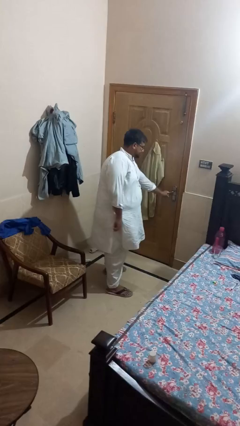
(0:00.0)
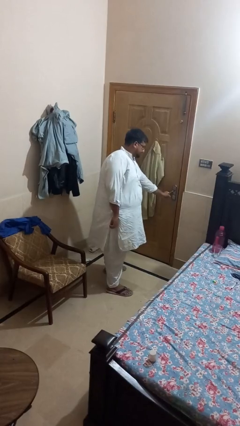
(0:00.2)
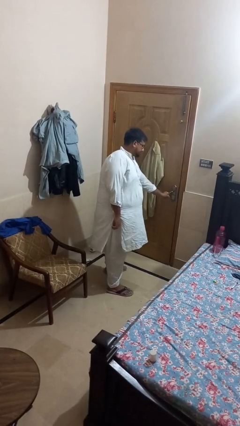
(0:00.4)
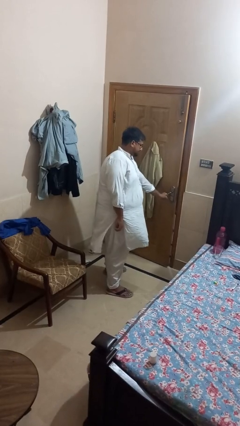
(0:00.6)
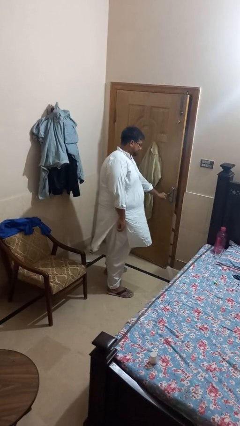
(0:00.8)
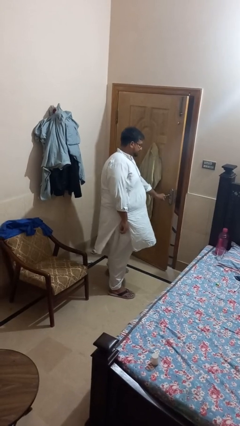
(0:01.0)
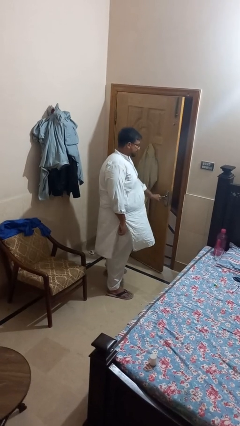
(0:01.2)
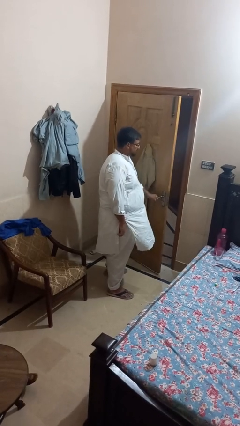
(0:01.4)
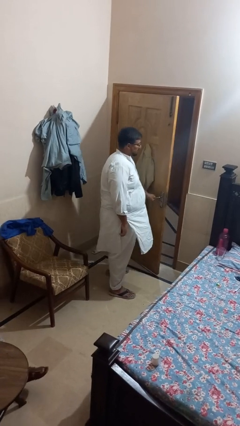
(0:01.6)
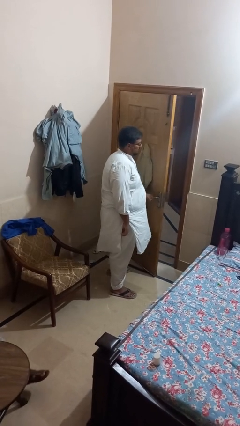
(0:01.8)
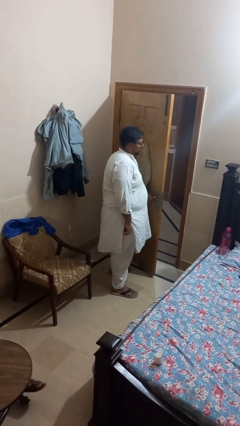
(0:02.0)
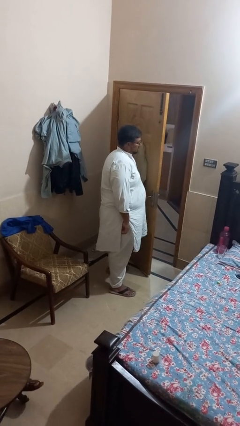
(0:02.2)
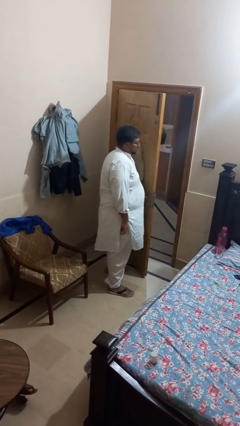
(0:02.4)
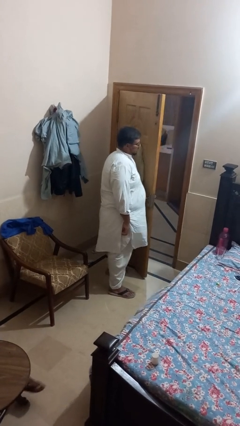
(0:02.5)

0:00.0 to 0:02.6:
person opens closet door

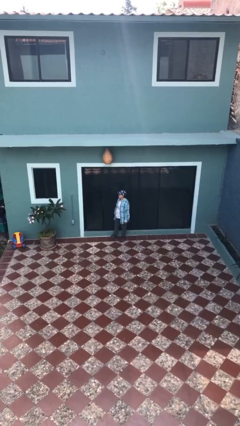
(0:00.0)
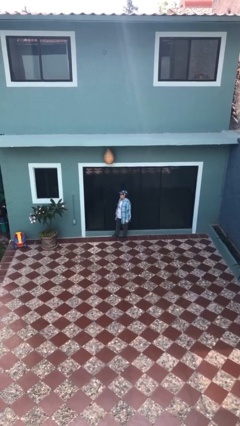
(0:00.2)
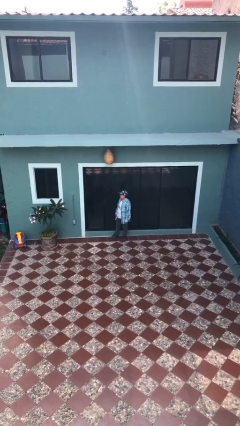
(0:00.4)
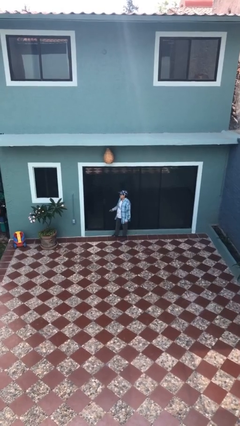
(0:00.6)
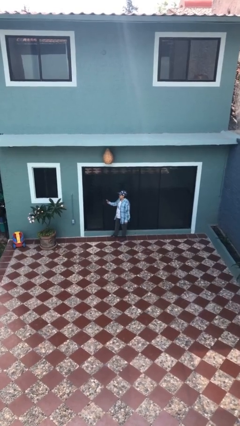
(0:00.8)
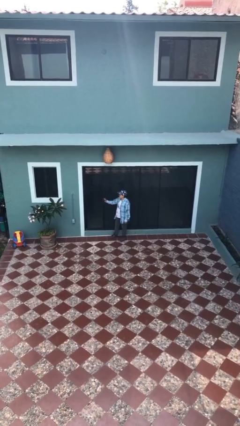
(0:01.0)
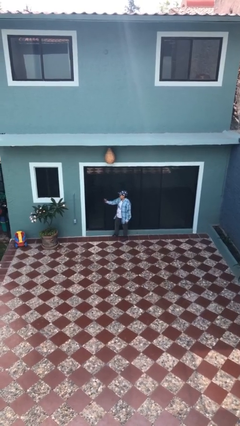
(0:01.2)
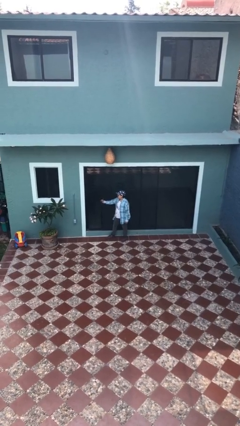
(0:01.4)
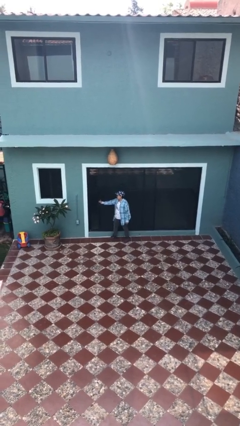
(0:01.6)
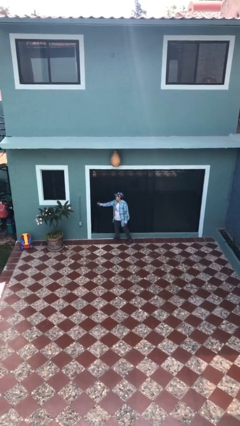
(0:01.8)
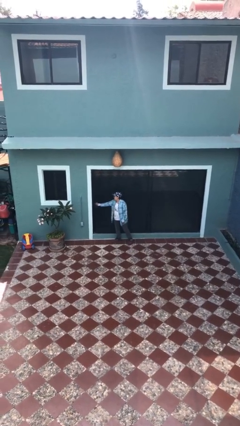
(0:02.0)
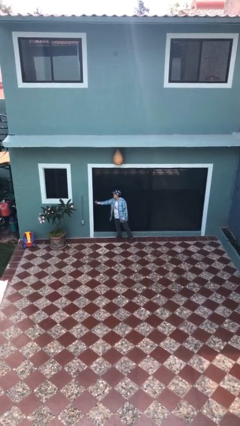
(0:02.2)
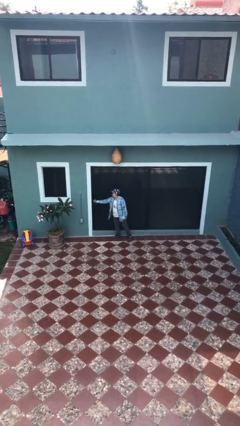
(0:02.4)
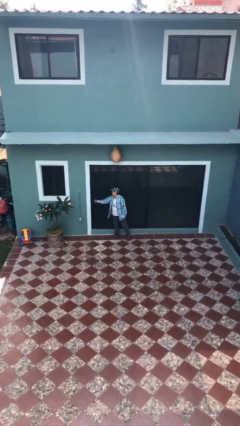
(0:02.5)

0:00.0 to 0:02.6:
person closes sliding door

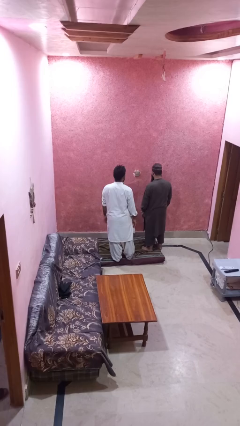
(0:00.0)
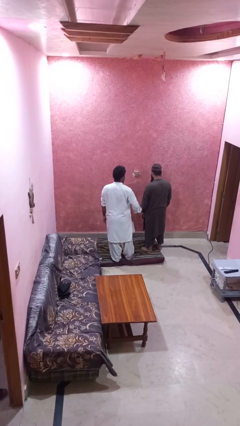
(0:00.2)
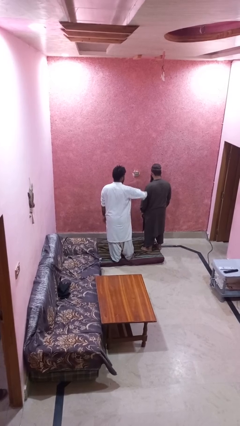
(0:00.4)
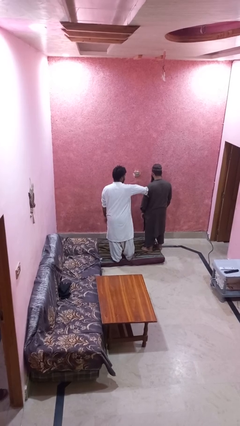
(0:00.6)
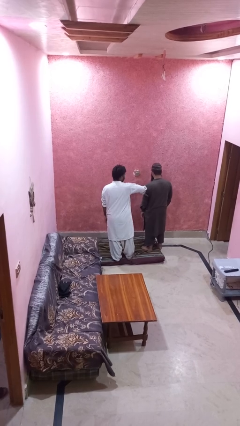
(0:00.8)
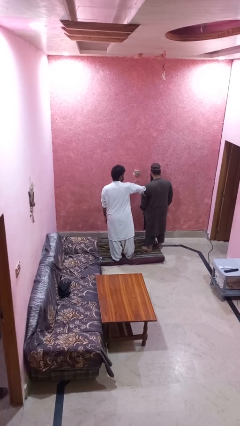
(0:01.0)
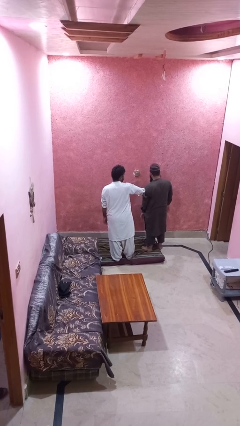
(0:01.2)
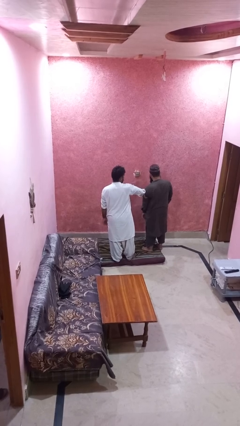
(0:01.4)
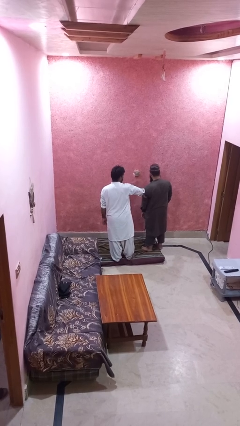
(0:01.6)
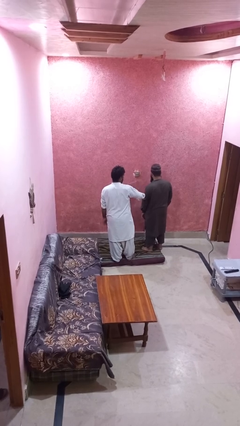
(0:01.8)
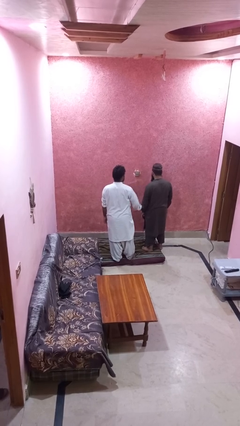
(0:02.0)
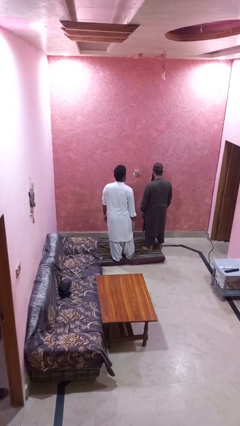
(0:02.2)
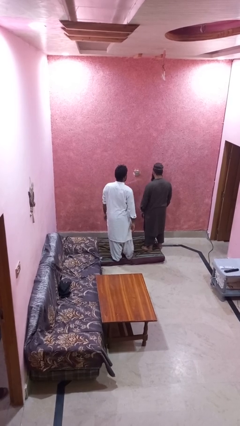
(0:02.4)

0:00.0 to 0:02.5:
person grabs person by bicep

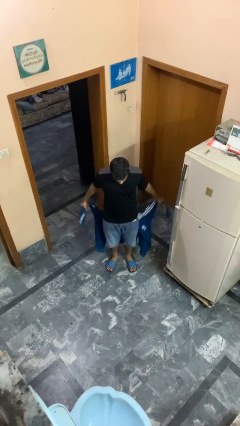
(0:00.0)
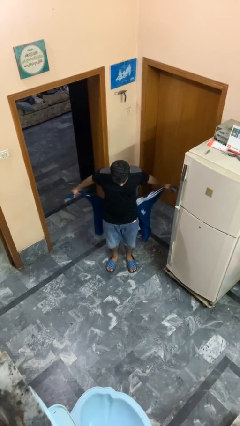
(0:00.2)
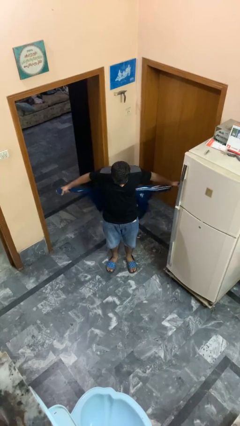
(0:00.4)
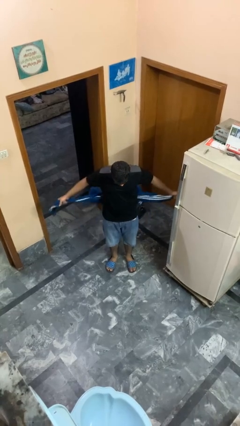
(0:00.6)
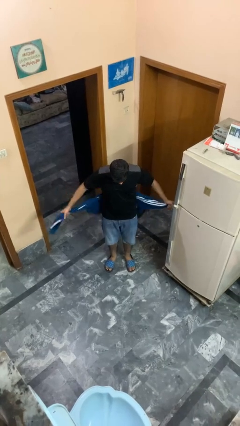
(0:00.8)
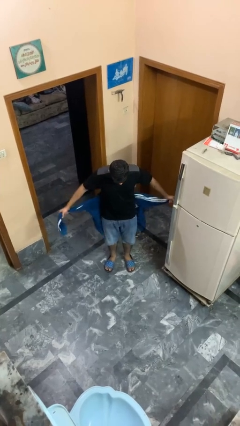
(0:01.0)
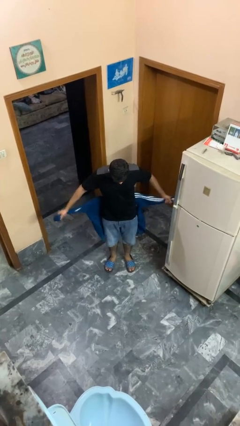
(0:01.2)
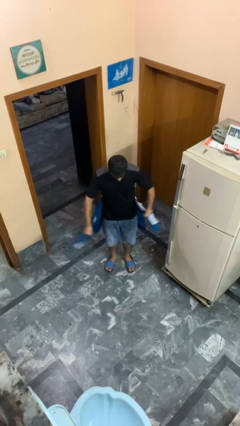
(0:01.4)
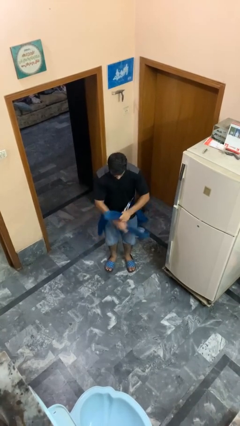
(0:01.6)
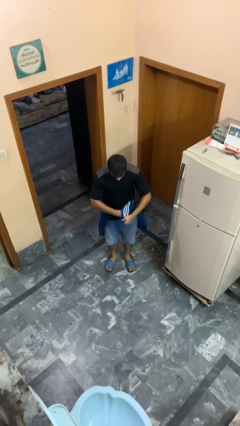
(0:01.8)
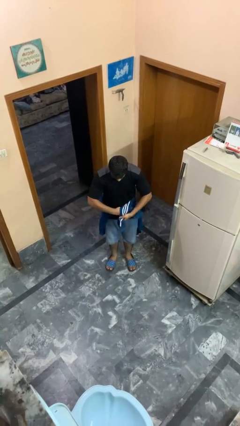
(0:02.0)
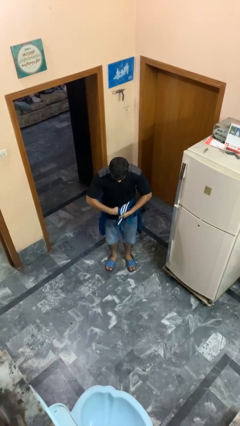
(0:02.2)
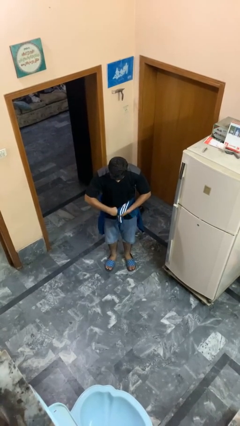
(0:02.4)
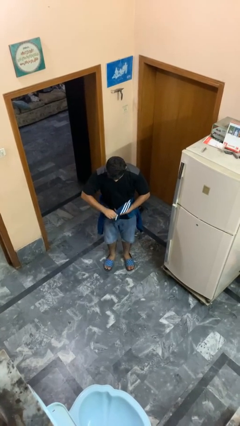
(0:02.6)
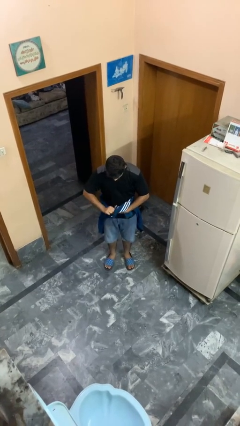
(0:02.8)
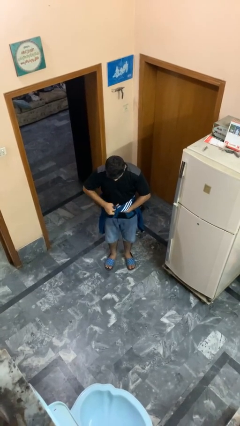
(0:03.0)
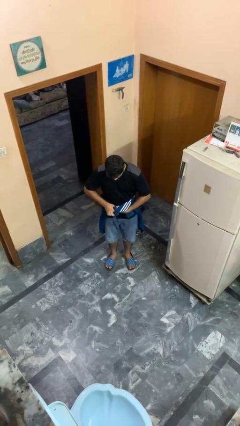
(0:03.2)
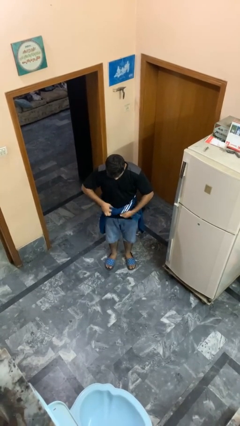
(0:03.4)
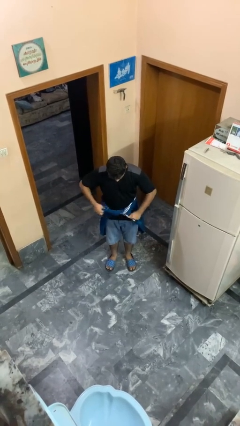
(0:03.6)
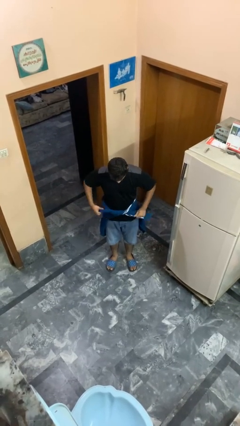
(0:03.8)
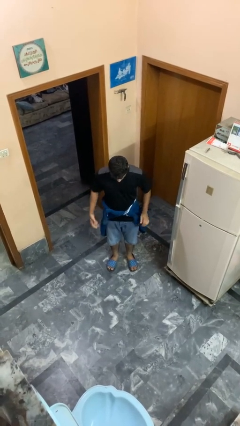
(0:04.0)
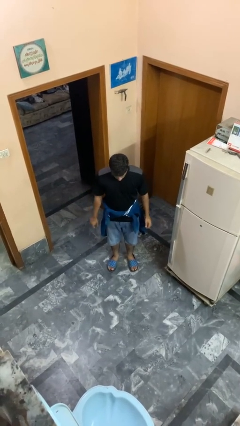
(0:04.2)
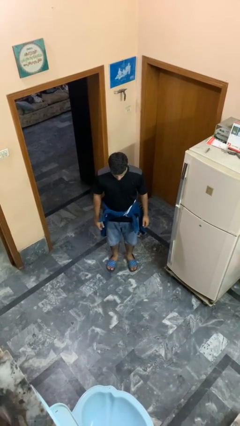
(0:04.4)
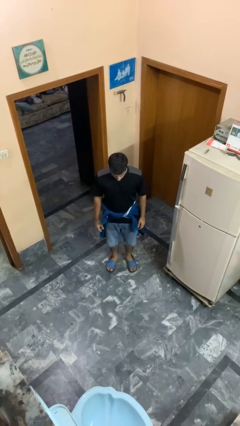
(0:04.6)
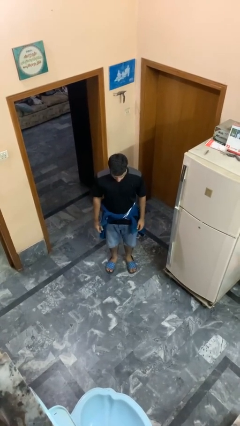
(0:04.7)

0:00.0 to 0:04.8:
person ties jacket around waist

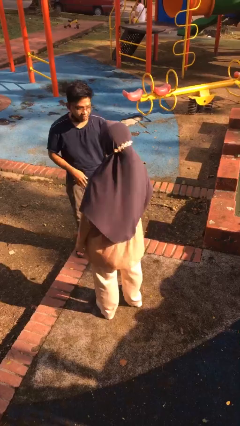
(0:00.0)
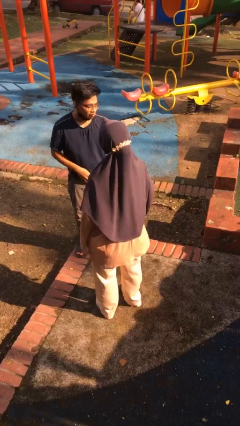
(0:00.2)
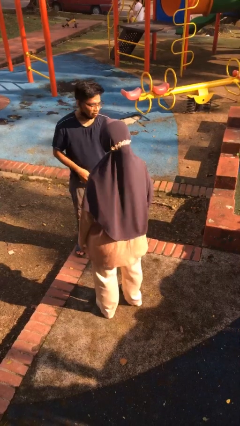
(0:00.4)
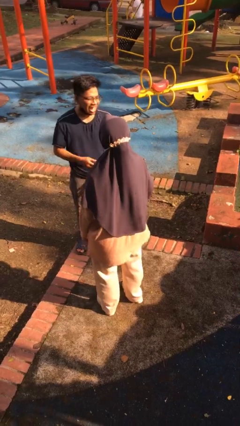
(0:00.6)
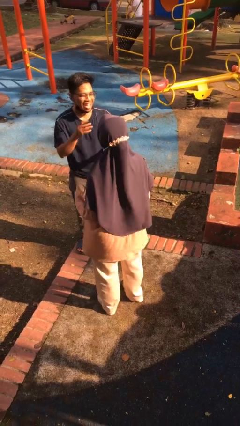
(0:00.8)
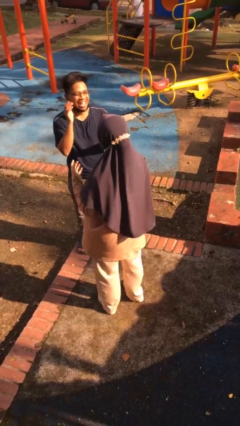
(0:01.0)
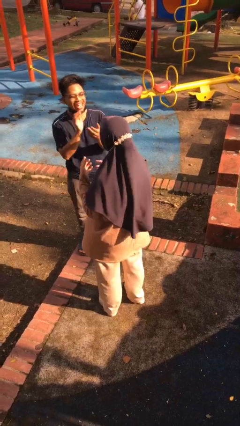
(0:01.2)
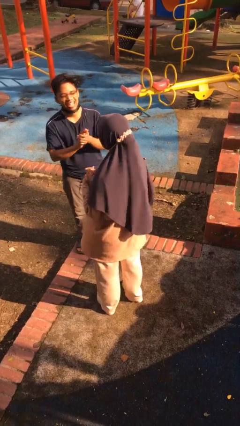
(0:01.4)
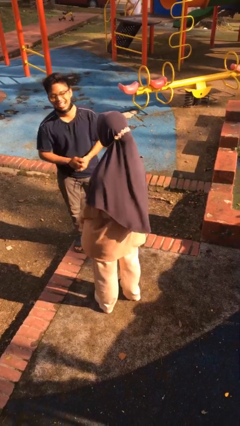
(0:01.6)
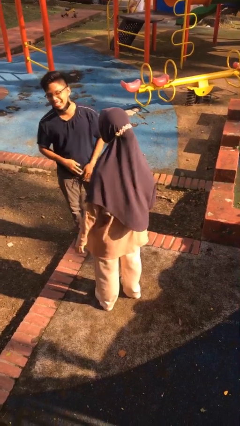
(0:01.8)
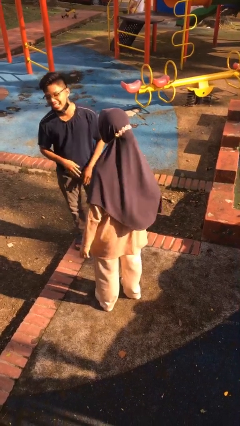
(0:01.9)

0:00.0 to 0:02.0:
person laughs with person

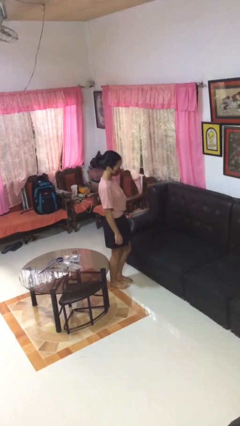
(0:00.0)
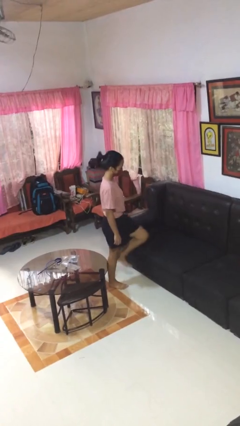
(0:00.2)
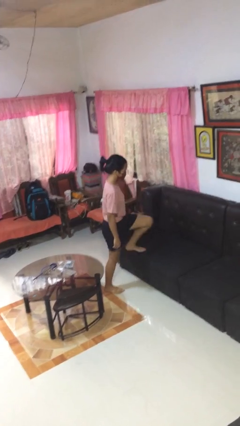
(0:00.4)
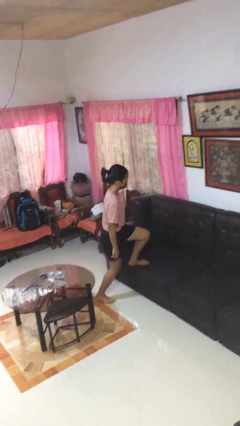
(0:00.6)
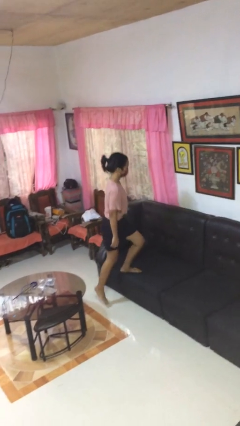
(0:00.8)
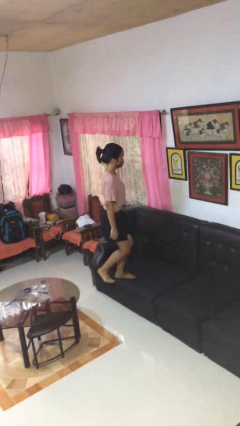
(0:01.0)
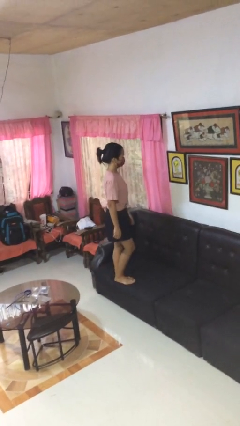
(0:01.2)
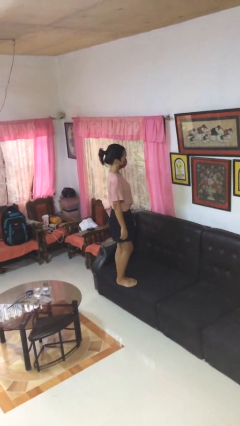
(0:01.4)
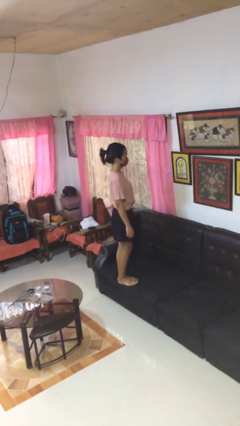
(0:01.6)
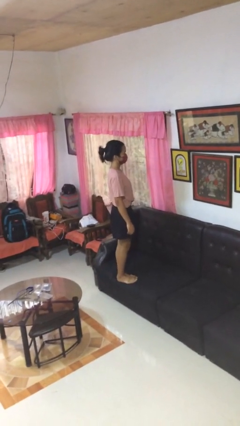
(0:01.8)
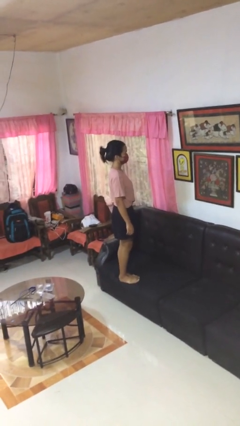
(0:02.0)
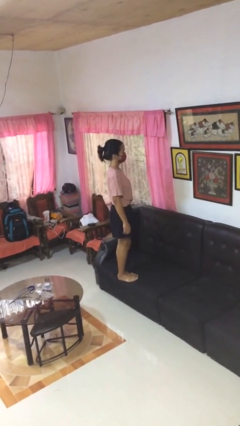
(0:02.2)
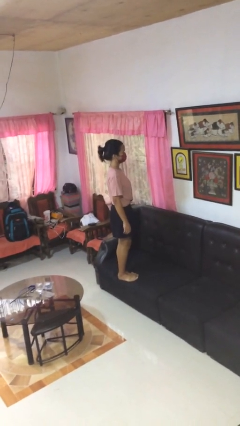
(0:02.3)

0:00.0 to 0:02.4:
person climbs on couch

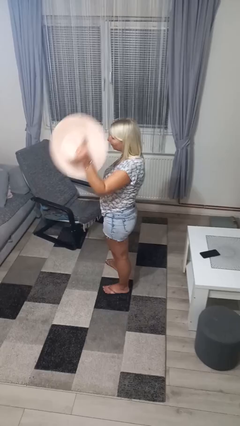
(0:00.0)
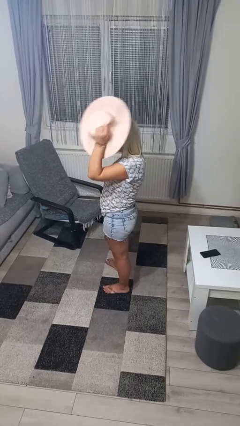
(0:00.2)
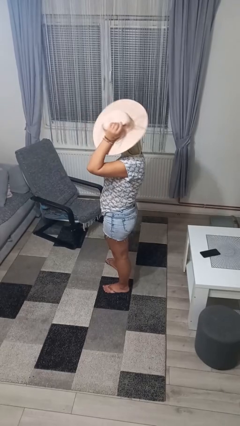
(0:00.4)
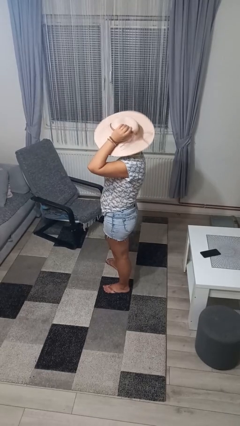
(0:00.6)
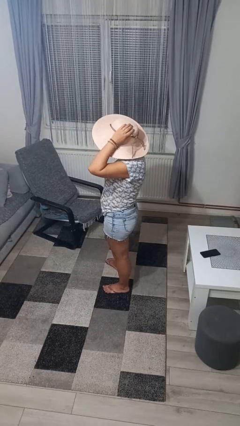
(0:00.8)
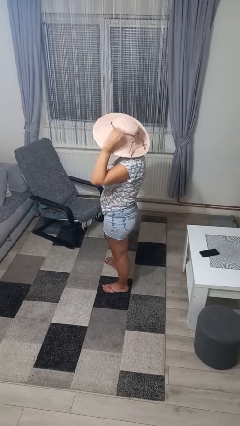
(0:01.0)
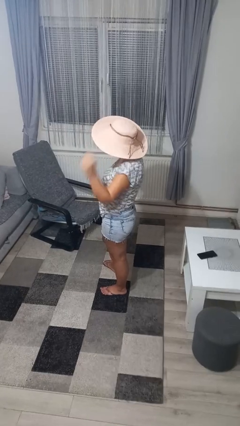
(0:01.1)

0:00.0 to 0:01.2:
person puts on hat
